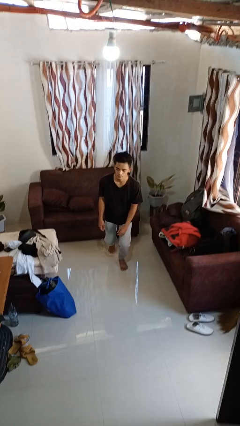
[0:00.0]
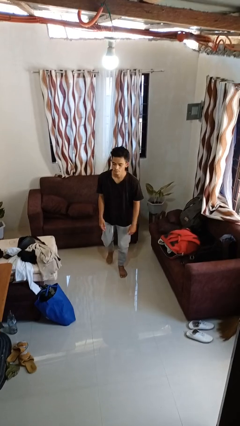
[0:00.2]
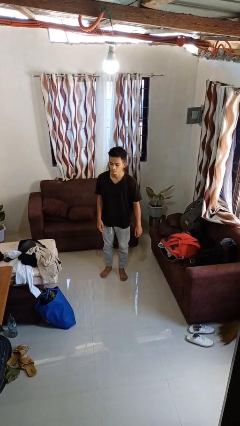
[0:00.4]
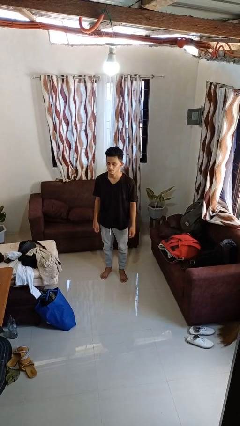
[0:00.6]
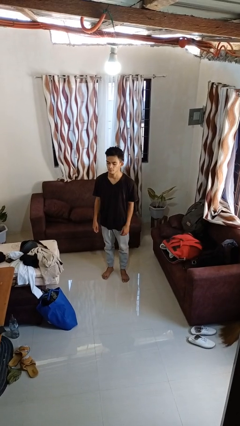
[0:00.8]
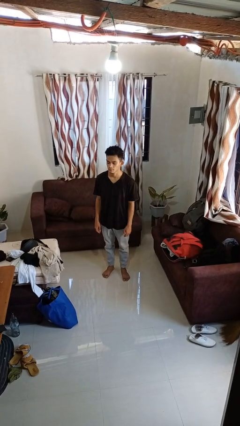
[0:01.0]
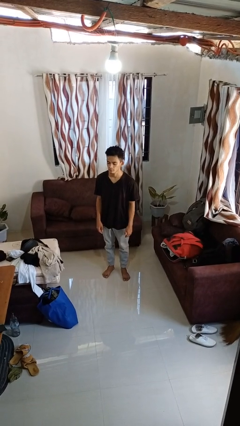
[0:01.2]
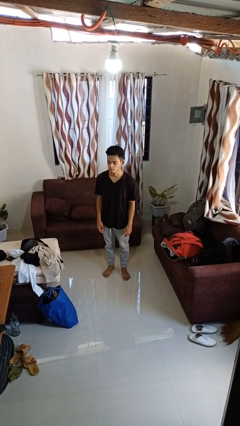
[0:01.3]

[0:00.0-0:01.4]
person stands up from floor

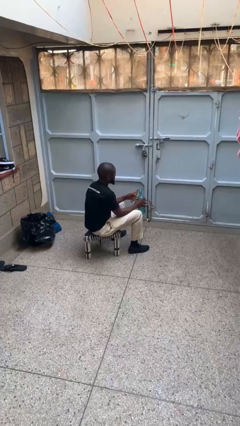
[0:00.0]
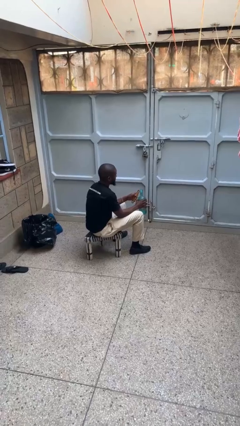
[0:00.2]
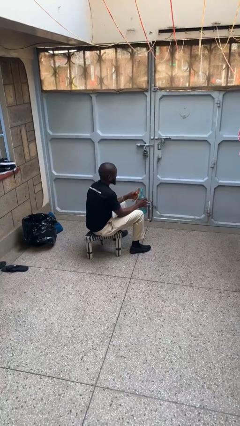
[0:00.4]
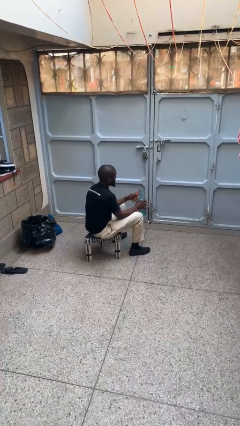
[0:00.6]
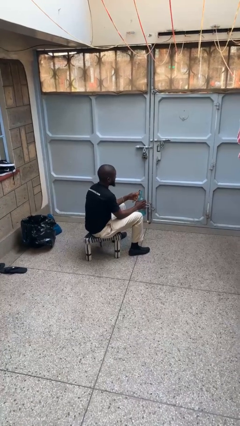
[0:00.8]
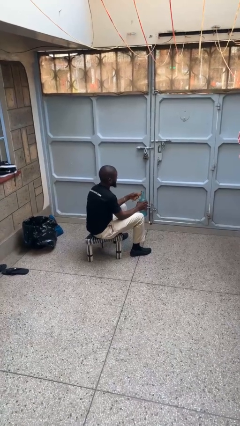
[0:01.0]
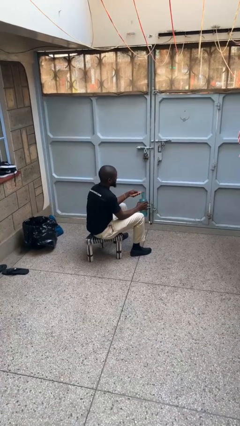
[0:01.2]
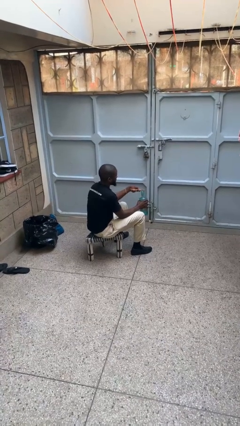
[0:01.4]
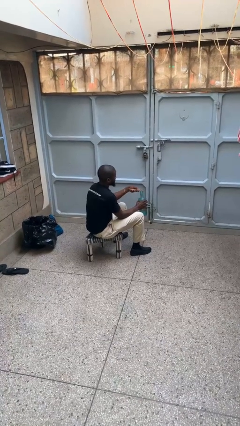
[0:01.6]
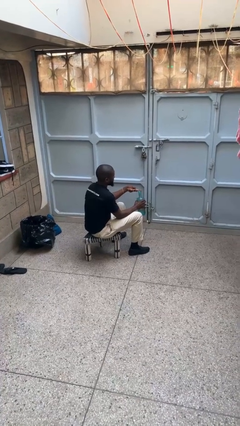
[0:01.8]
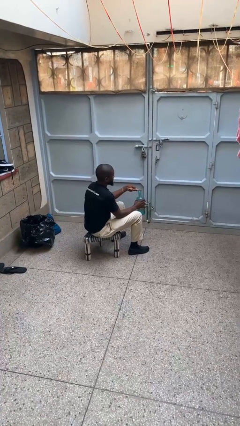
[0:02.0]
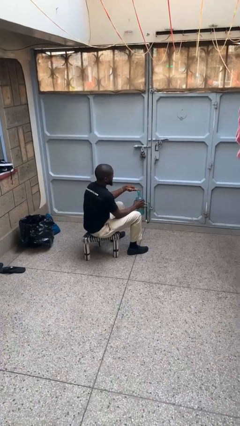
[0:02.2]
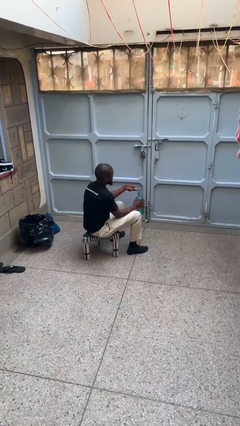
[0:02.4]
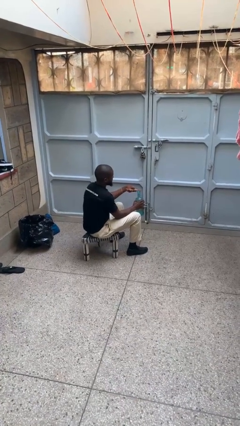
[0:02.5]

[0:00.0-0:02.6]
person opens can with can opener

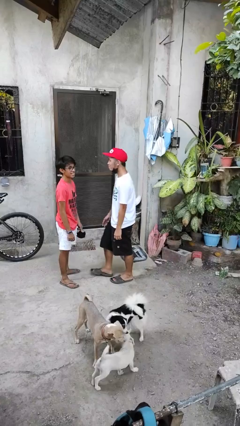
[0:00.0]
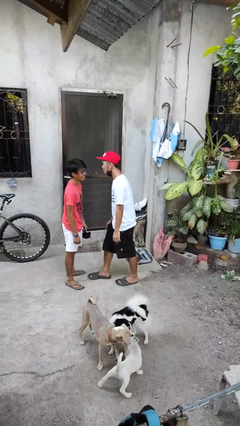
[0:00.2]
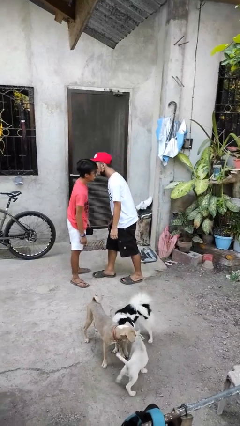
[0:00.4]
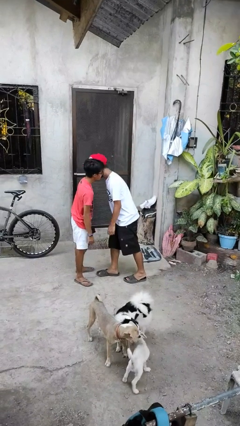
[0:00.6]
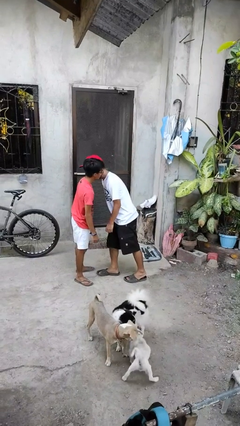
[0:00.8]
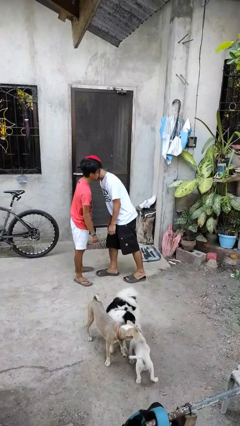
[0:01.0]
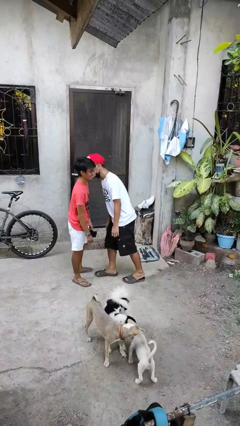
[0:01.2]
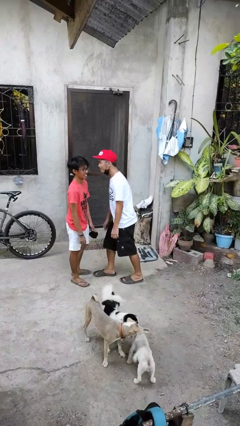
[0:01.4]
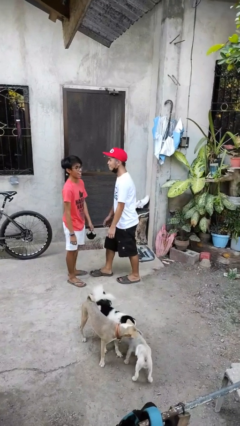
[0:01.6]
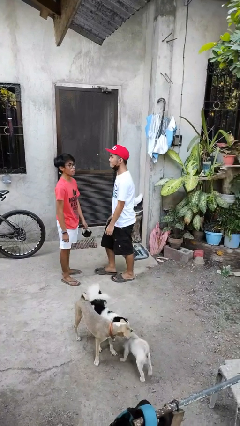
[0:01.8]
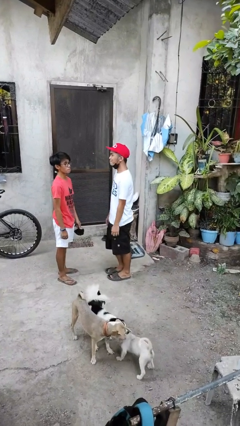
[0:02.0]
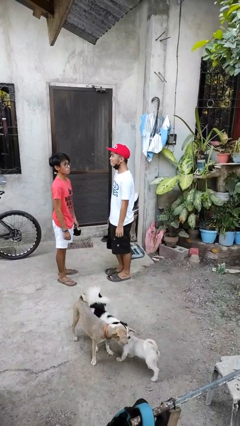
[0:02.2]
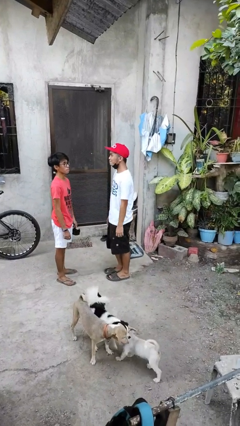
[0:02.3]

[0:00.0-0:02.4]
person kisses cheek of person

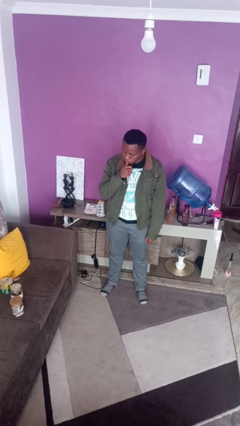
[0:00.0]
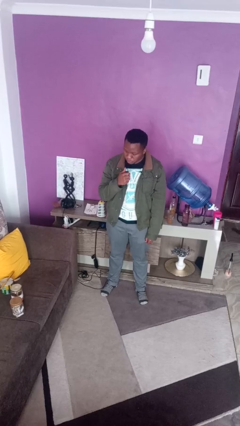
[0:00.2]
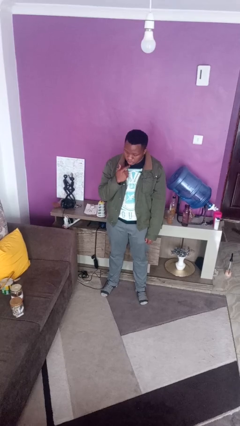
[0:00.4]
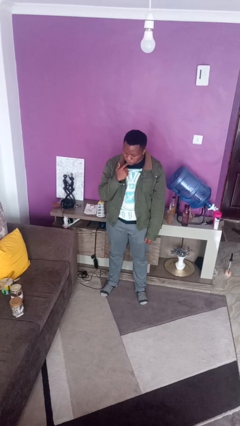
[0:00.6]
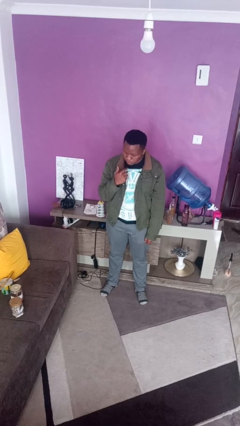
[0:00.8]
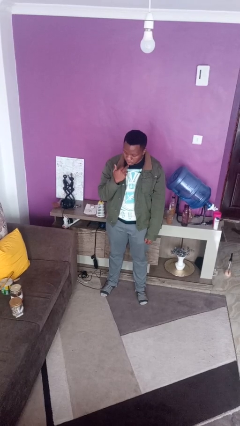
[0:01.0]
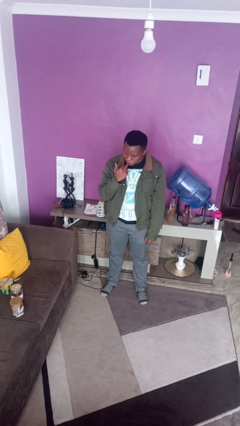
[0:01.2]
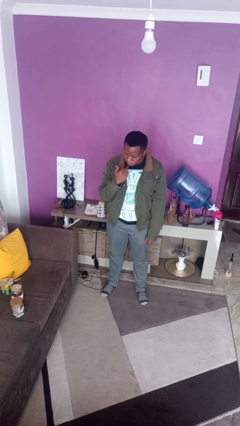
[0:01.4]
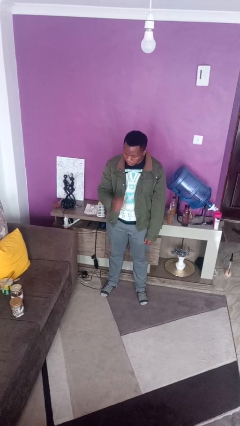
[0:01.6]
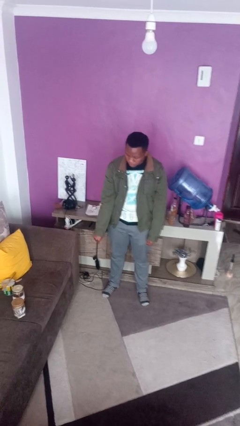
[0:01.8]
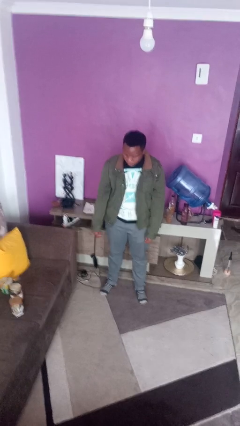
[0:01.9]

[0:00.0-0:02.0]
person licks fingers

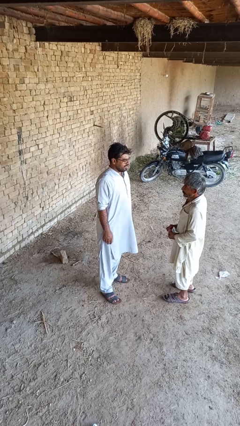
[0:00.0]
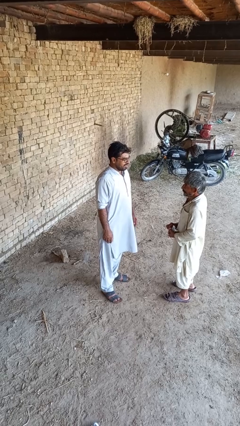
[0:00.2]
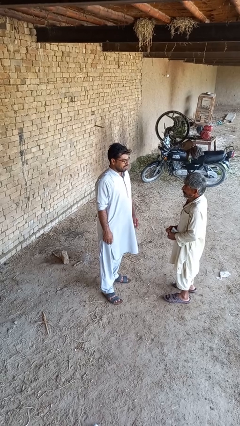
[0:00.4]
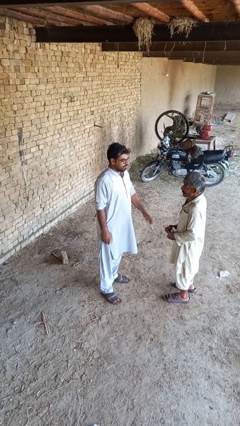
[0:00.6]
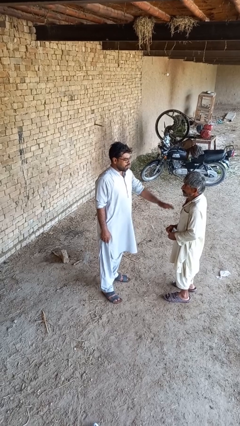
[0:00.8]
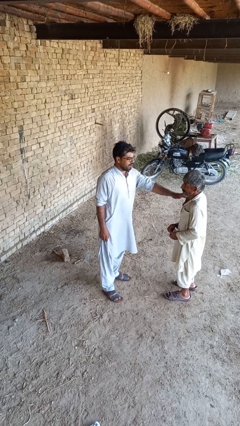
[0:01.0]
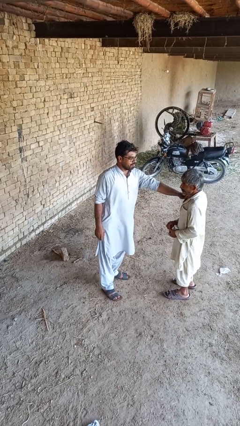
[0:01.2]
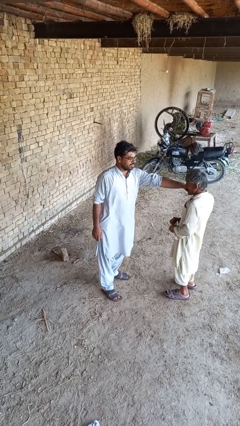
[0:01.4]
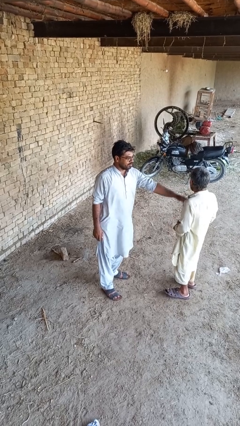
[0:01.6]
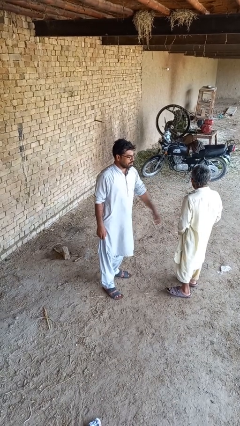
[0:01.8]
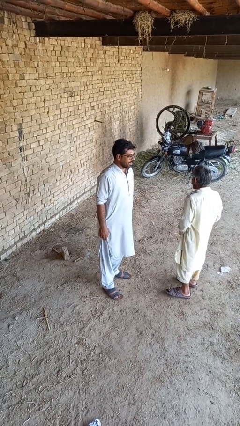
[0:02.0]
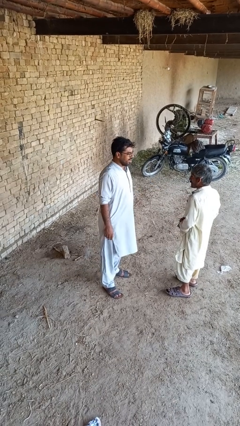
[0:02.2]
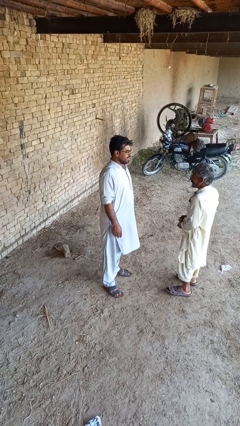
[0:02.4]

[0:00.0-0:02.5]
person shoves person

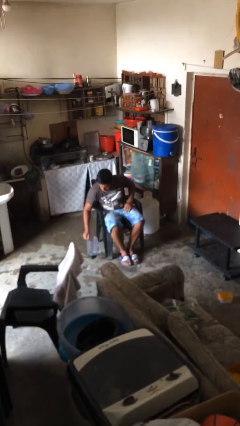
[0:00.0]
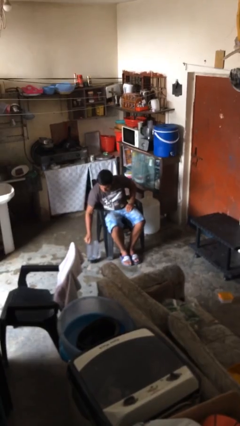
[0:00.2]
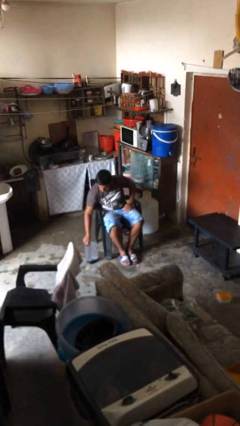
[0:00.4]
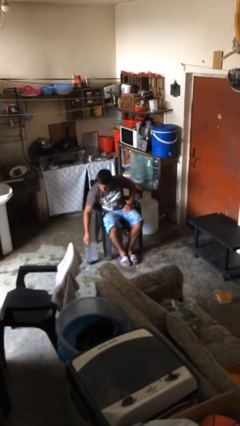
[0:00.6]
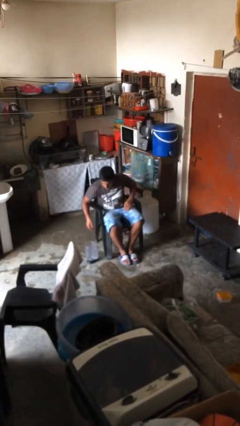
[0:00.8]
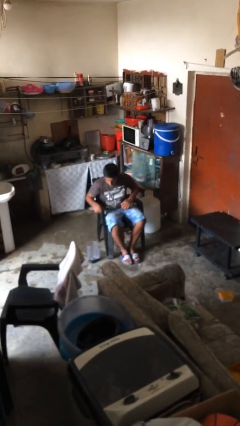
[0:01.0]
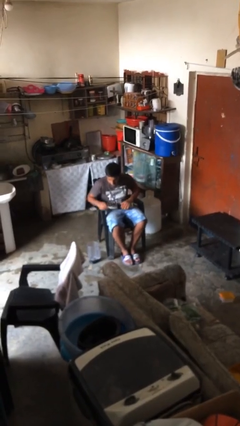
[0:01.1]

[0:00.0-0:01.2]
person puts down object on floor

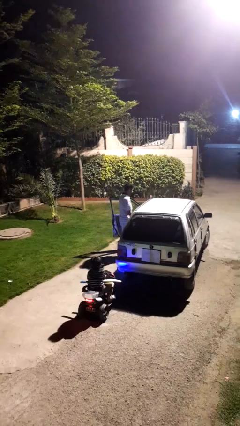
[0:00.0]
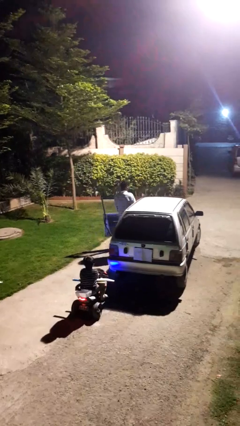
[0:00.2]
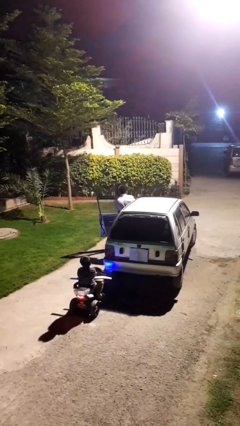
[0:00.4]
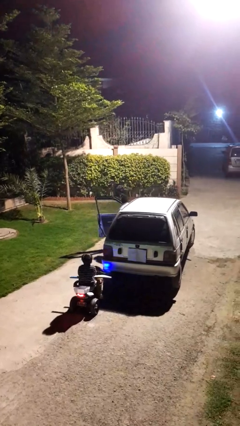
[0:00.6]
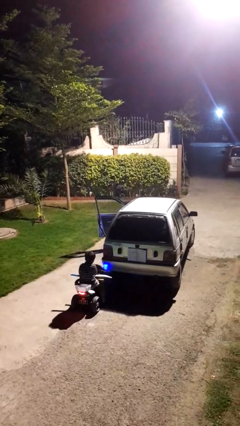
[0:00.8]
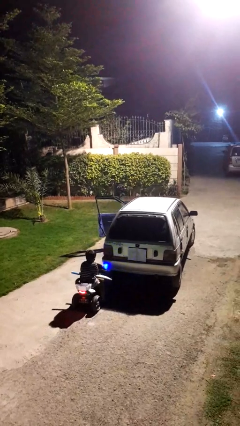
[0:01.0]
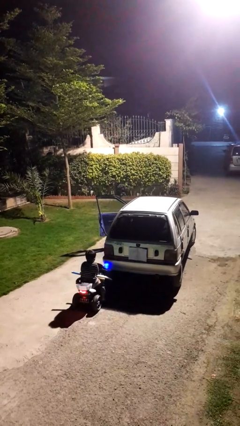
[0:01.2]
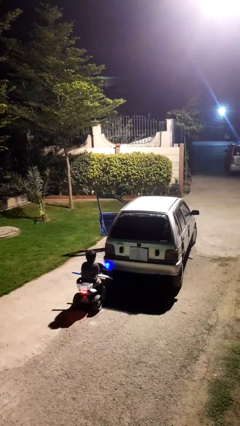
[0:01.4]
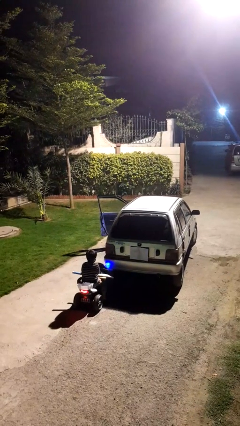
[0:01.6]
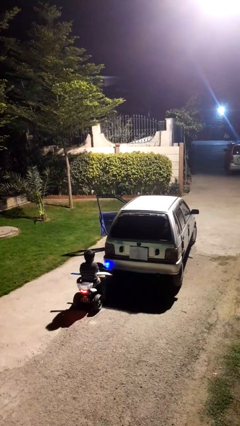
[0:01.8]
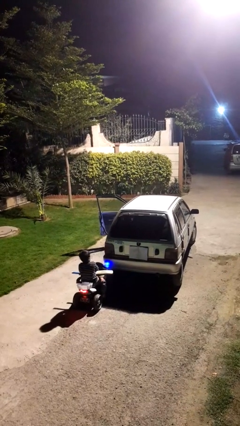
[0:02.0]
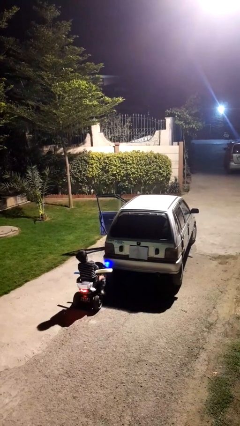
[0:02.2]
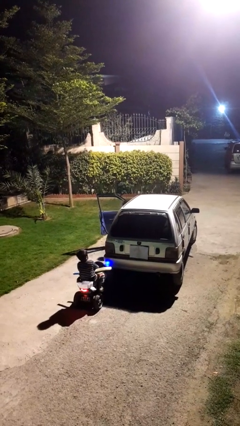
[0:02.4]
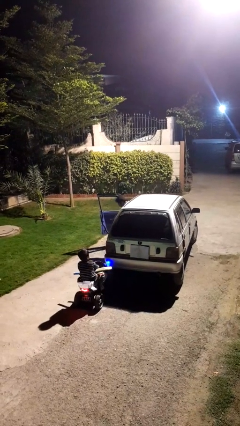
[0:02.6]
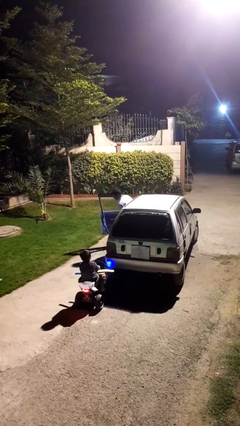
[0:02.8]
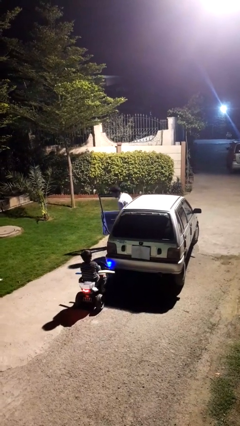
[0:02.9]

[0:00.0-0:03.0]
person enters car

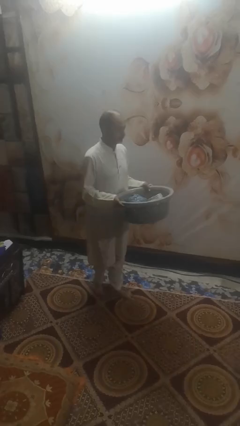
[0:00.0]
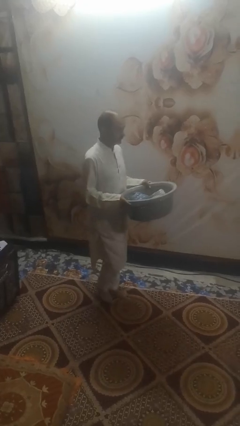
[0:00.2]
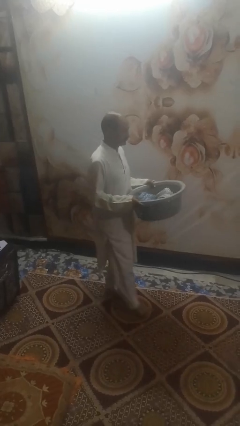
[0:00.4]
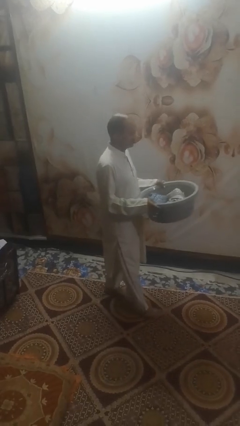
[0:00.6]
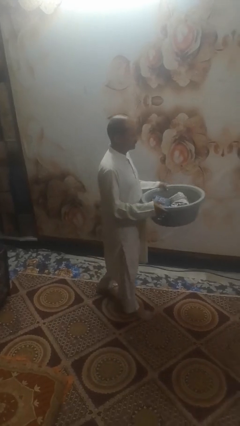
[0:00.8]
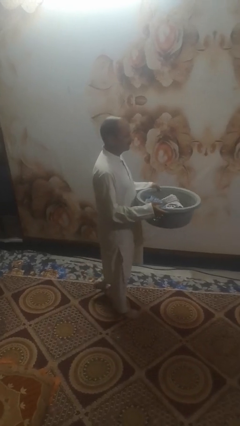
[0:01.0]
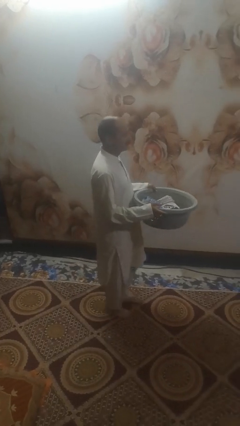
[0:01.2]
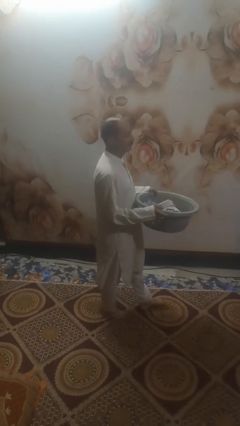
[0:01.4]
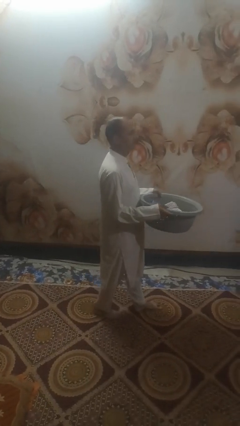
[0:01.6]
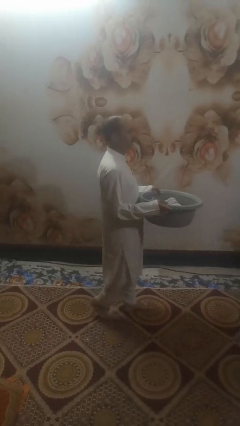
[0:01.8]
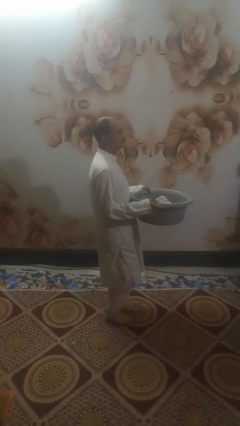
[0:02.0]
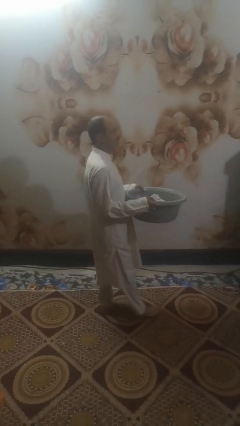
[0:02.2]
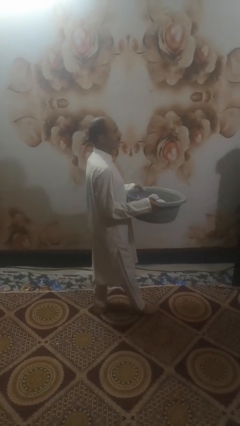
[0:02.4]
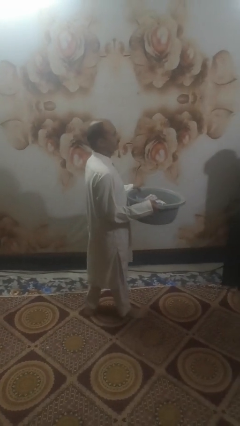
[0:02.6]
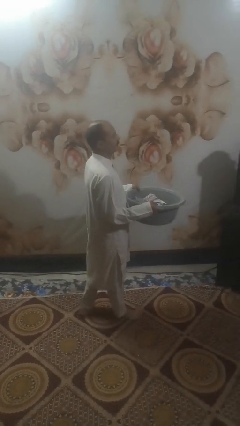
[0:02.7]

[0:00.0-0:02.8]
person carries laundry basket
